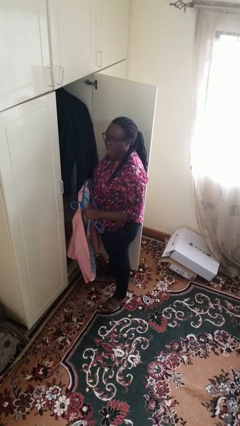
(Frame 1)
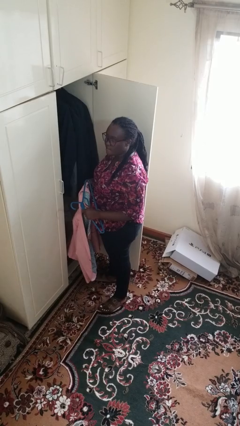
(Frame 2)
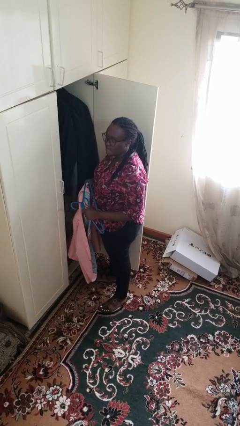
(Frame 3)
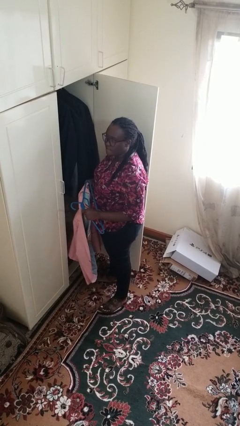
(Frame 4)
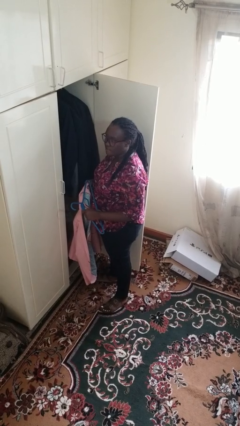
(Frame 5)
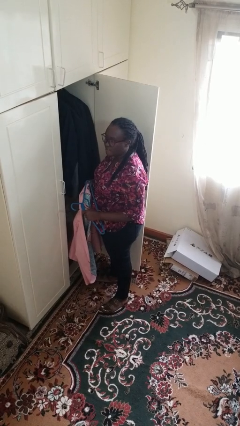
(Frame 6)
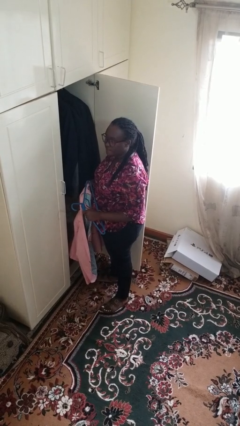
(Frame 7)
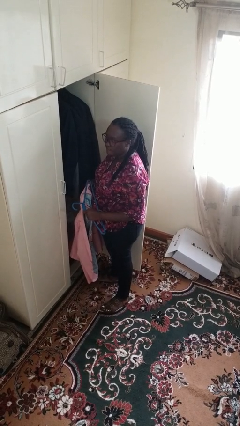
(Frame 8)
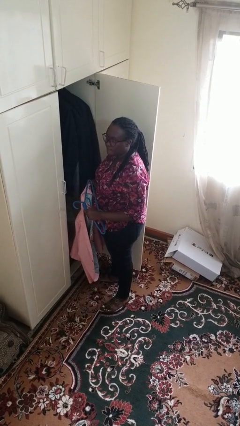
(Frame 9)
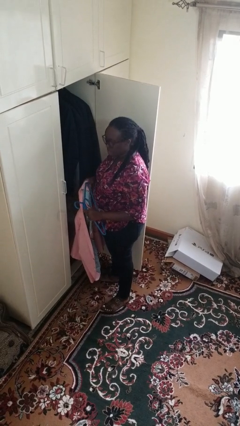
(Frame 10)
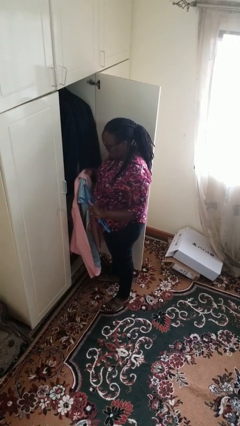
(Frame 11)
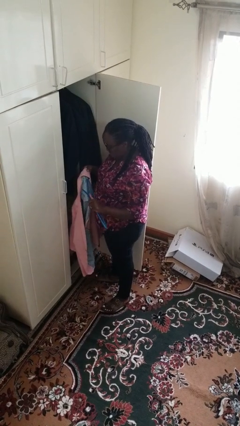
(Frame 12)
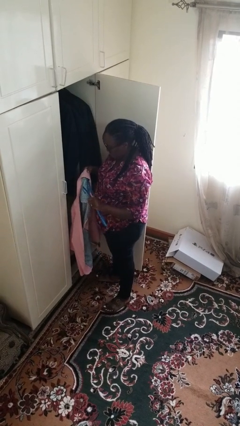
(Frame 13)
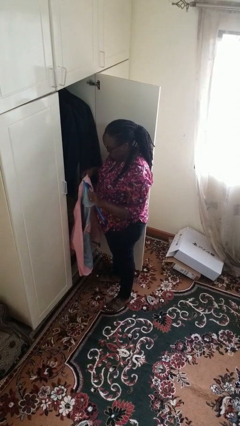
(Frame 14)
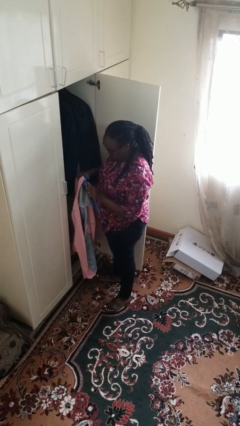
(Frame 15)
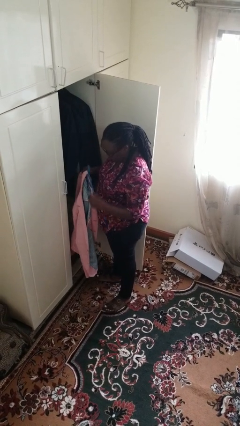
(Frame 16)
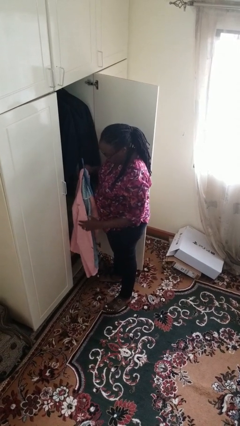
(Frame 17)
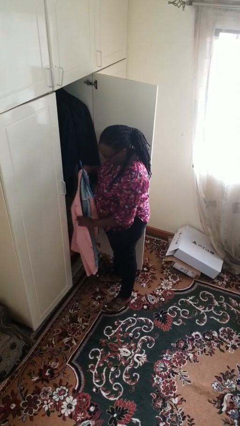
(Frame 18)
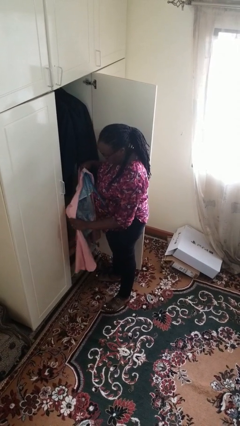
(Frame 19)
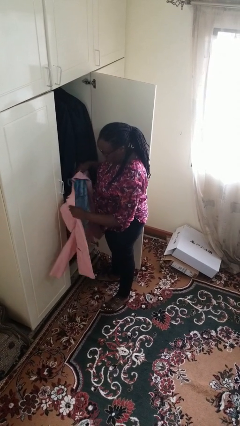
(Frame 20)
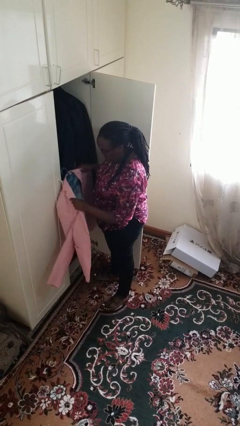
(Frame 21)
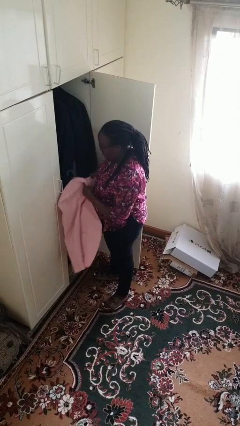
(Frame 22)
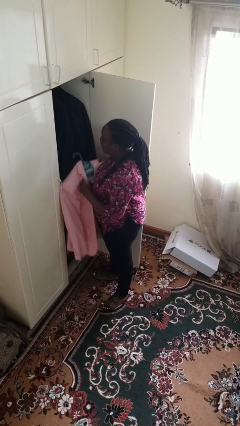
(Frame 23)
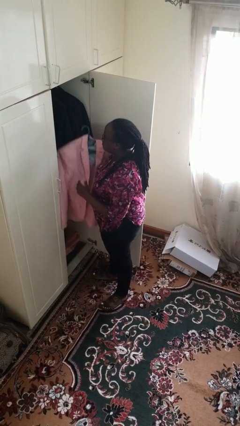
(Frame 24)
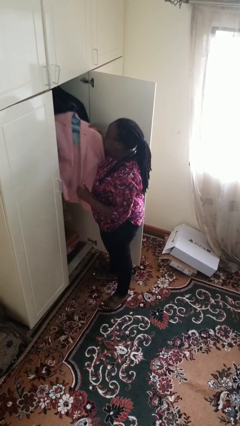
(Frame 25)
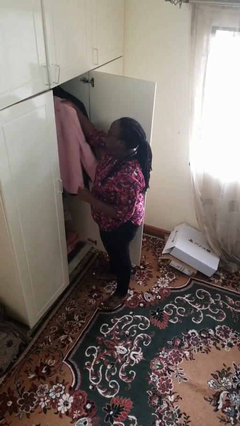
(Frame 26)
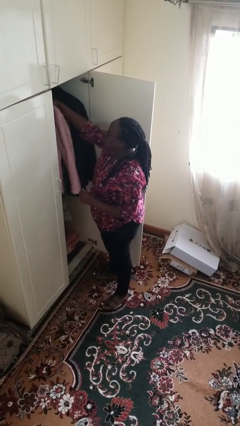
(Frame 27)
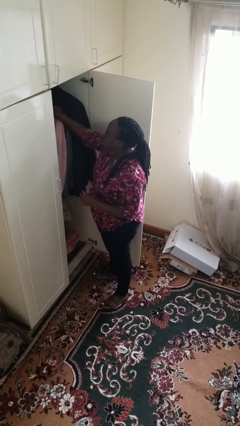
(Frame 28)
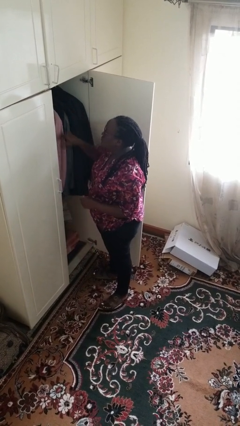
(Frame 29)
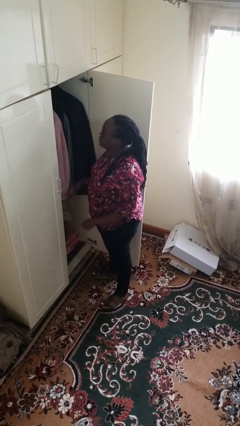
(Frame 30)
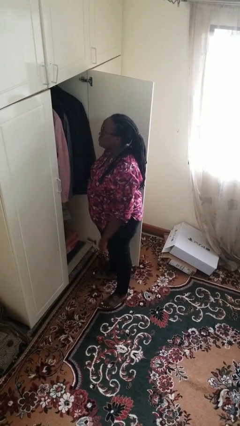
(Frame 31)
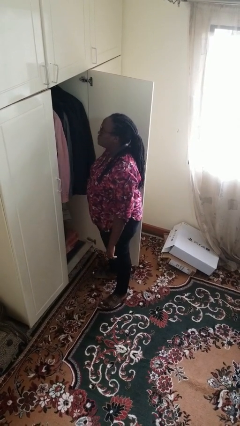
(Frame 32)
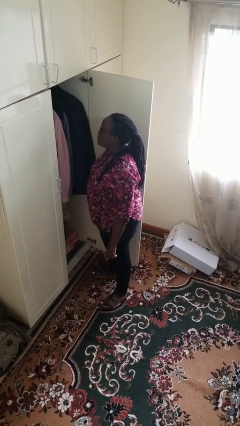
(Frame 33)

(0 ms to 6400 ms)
person puts clothes into closet

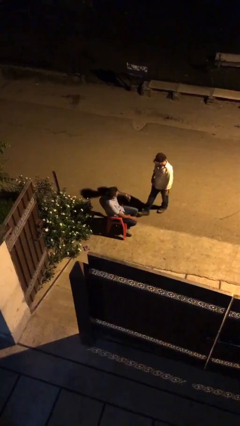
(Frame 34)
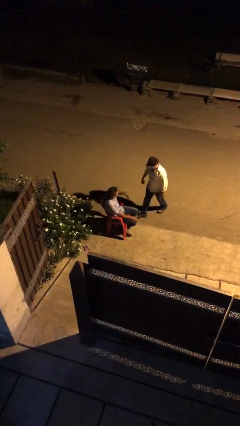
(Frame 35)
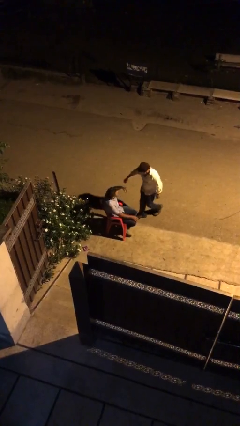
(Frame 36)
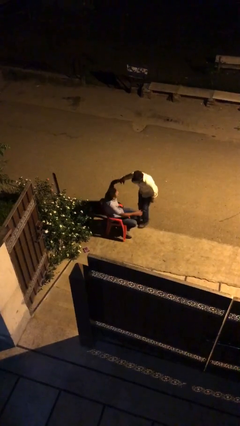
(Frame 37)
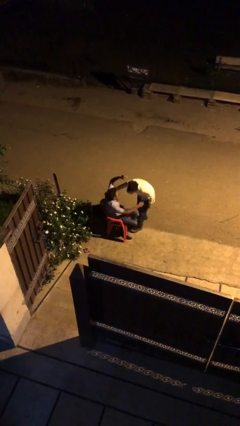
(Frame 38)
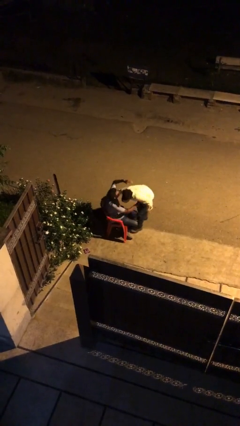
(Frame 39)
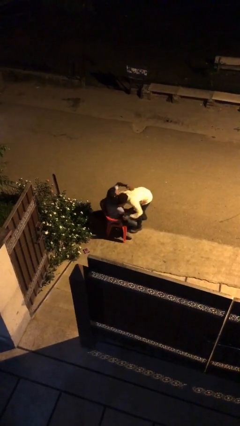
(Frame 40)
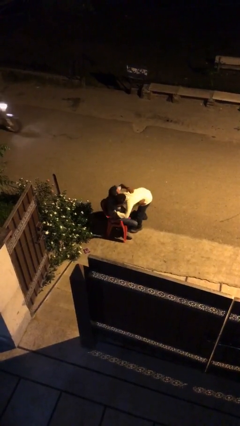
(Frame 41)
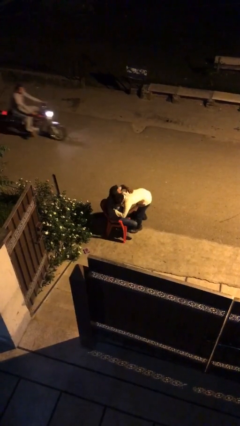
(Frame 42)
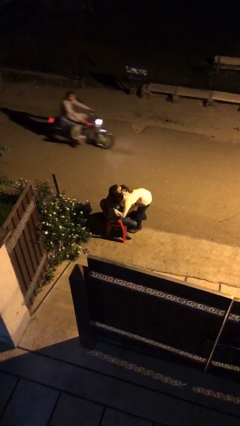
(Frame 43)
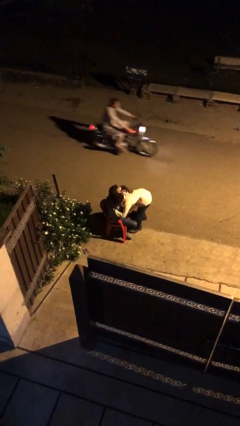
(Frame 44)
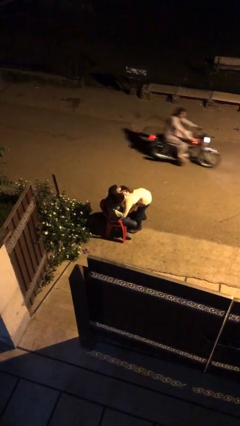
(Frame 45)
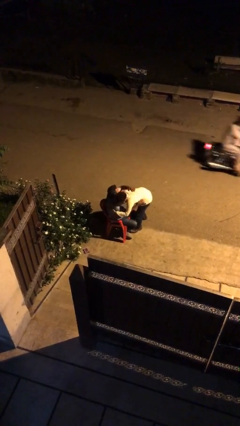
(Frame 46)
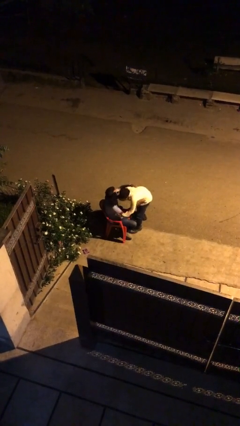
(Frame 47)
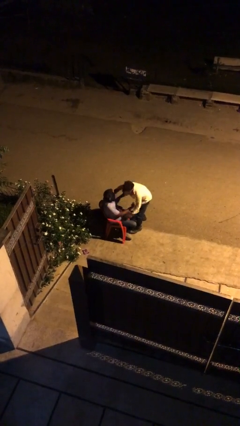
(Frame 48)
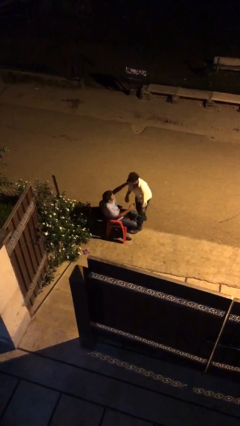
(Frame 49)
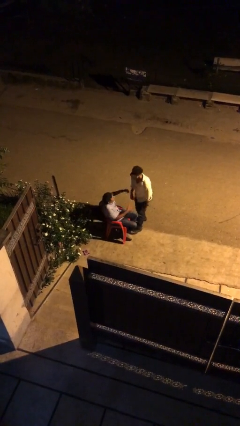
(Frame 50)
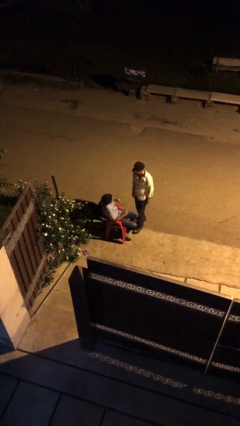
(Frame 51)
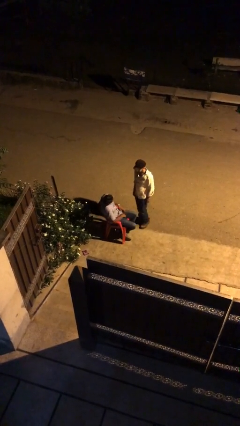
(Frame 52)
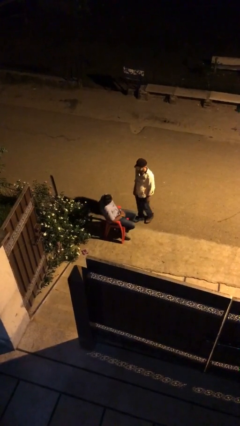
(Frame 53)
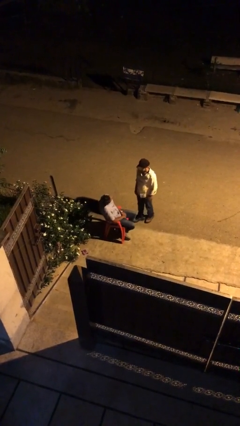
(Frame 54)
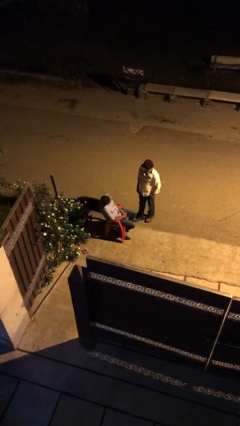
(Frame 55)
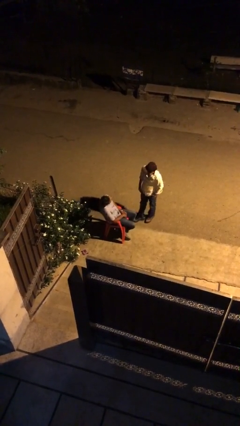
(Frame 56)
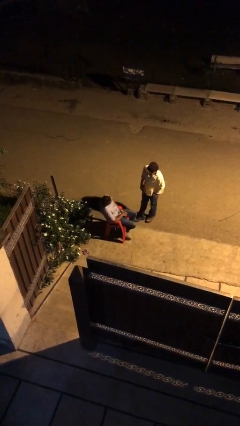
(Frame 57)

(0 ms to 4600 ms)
person embraces person

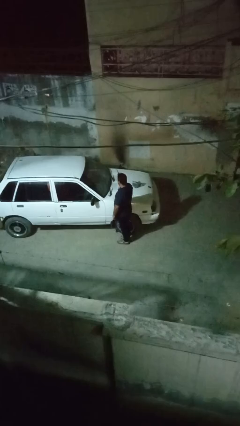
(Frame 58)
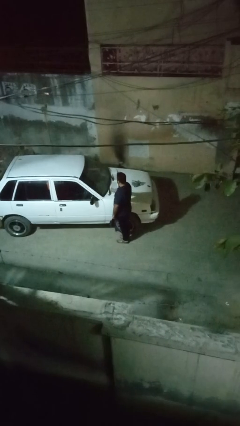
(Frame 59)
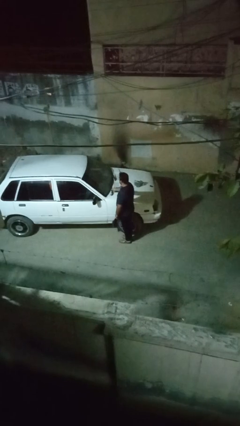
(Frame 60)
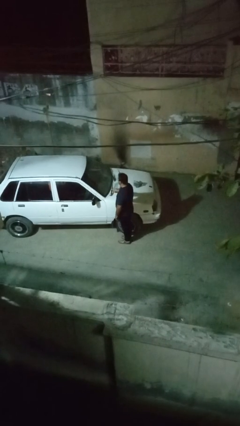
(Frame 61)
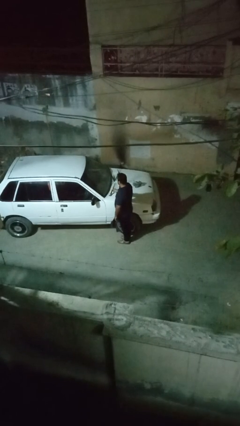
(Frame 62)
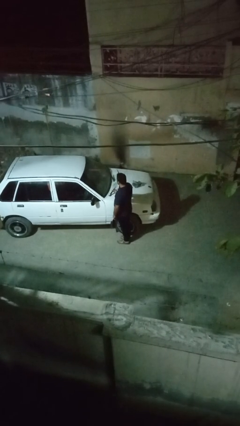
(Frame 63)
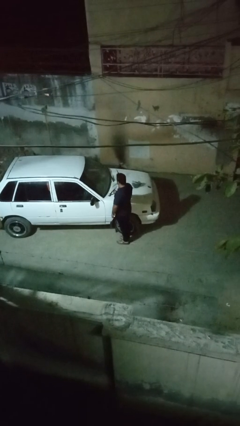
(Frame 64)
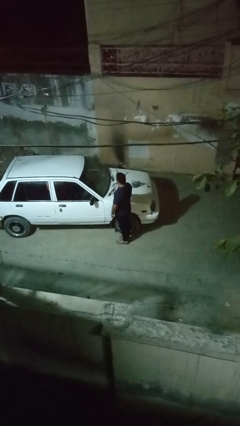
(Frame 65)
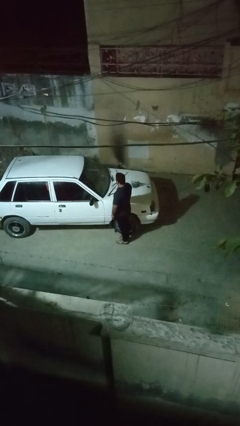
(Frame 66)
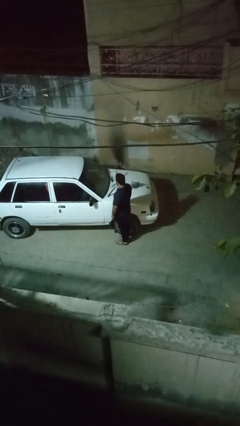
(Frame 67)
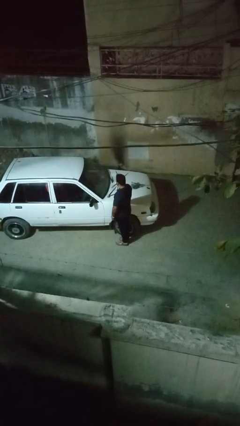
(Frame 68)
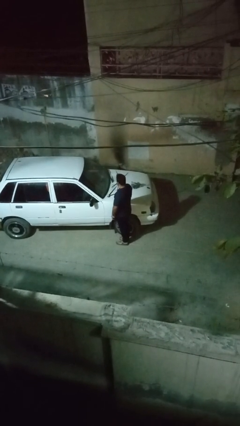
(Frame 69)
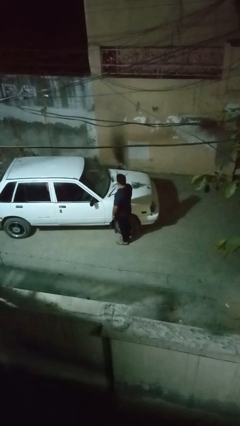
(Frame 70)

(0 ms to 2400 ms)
person flips up car wipers

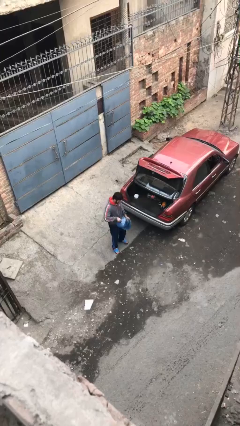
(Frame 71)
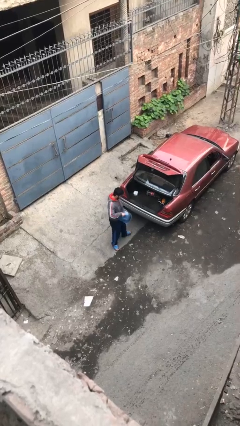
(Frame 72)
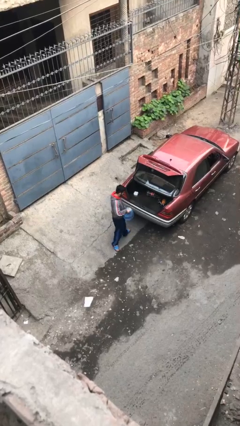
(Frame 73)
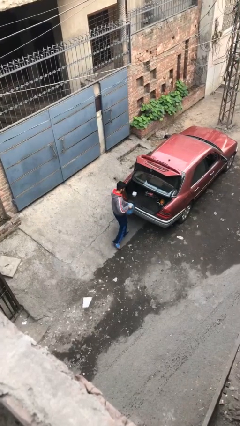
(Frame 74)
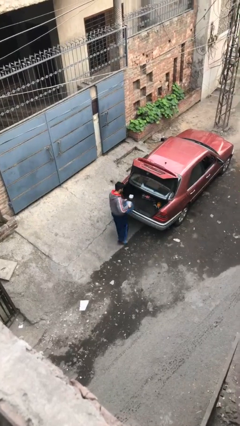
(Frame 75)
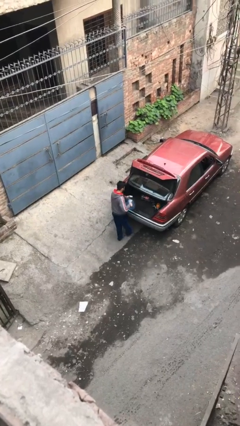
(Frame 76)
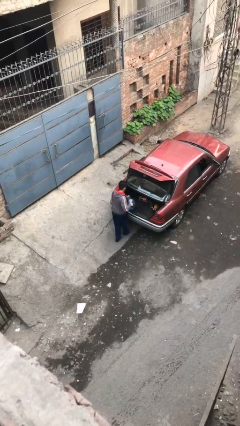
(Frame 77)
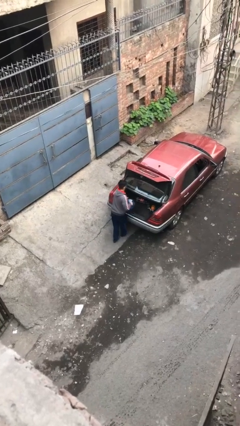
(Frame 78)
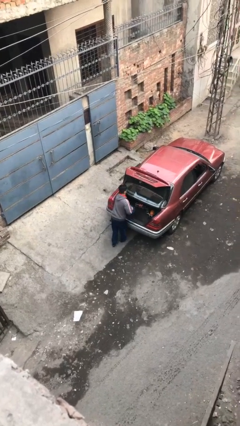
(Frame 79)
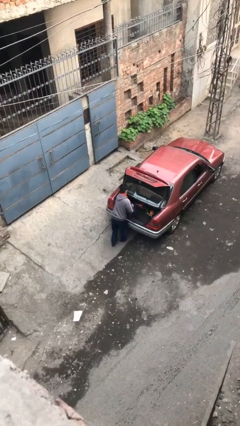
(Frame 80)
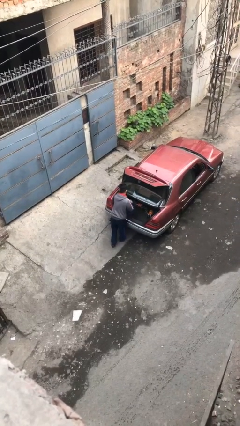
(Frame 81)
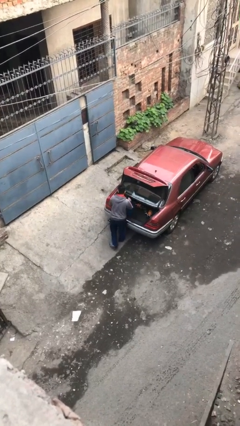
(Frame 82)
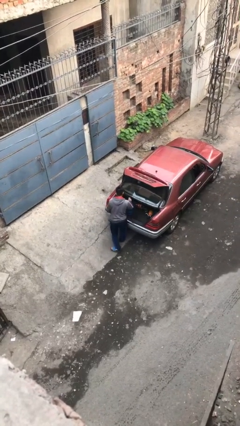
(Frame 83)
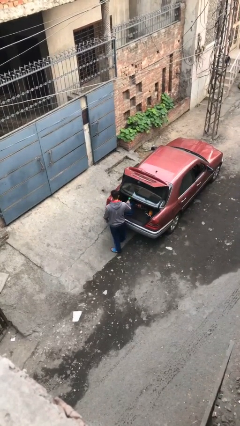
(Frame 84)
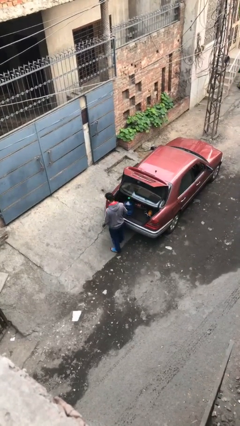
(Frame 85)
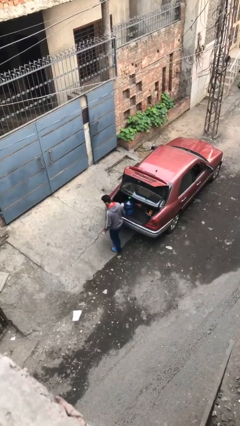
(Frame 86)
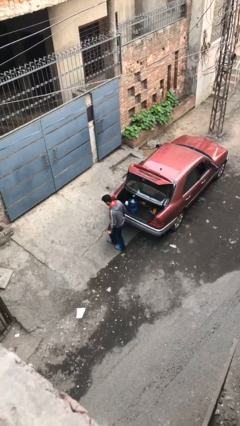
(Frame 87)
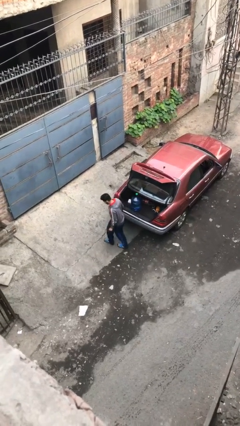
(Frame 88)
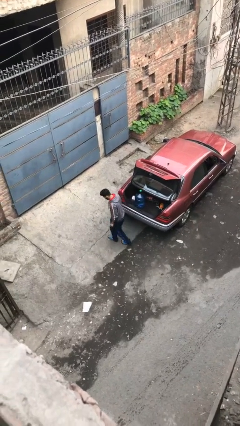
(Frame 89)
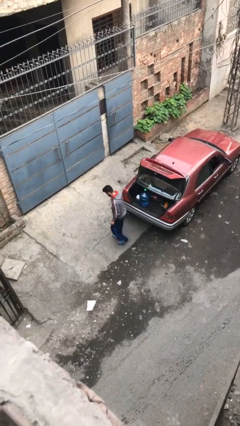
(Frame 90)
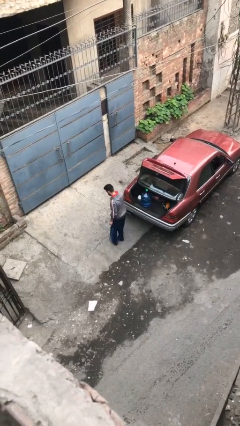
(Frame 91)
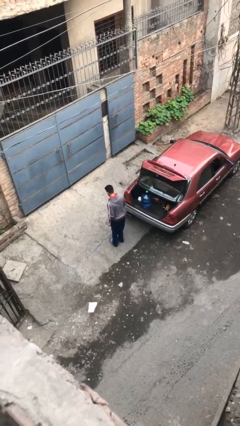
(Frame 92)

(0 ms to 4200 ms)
person loads car
